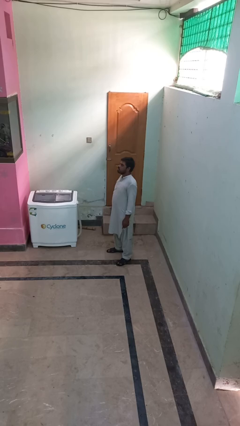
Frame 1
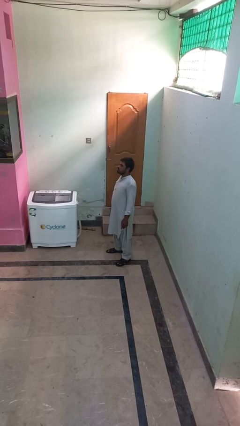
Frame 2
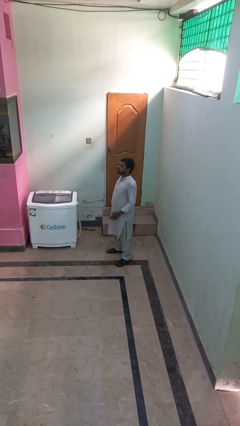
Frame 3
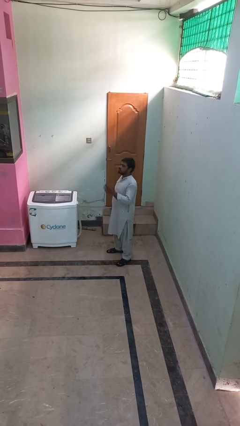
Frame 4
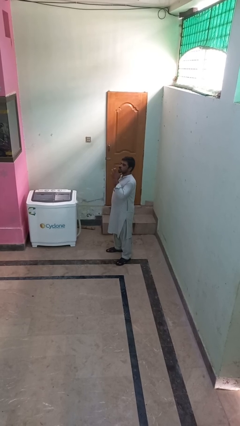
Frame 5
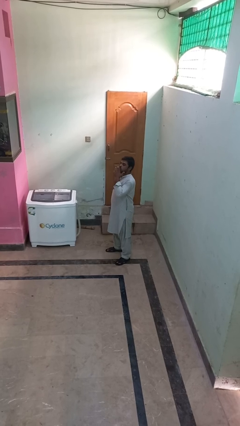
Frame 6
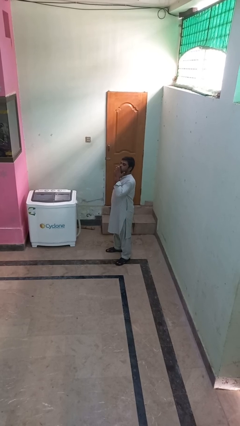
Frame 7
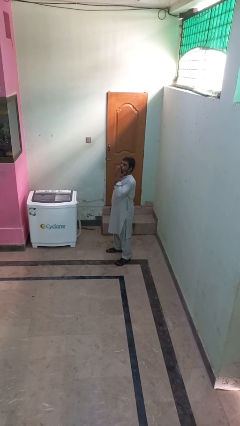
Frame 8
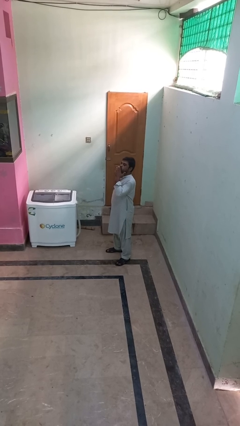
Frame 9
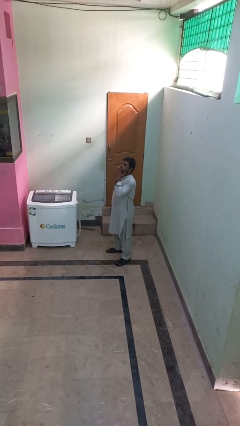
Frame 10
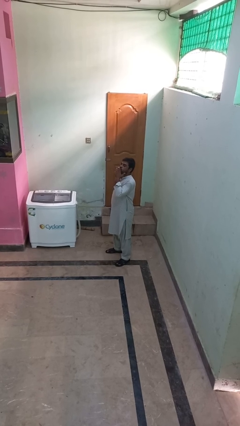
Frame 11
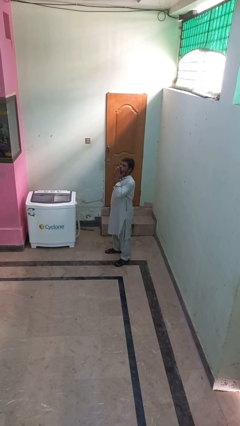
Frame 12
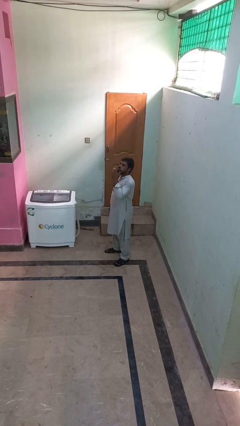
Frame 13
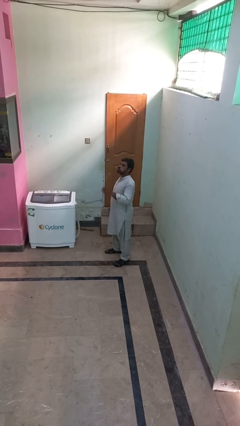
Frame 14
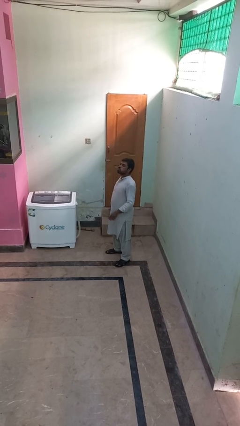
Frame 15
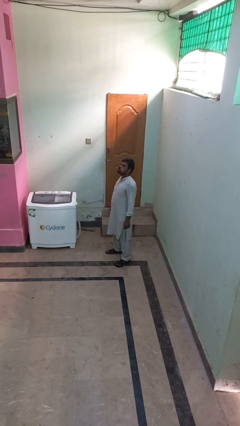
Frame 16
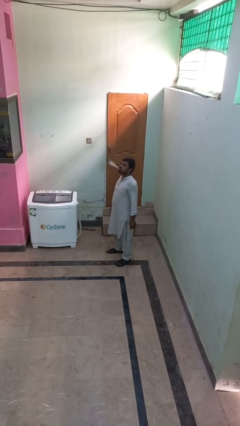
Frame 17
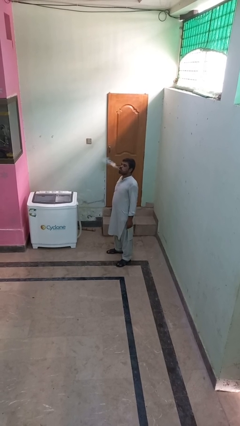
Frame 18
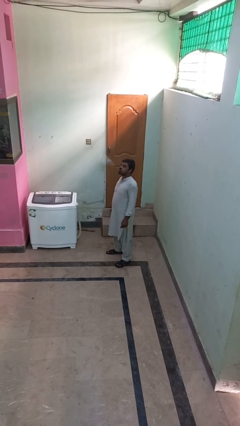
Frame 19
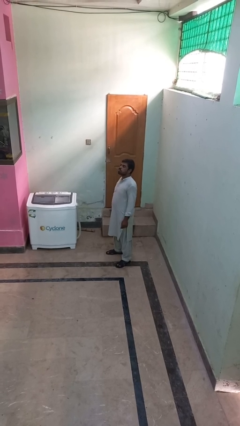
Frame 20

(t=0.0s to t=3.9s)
person vapes

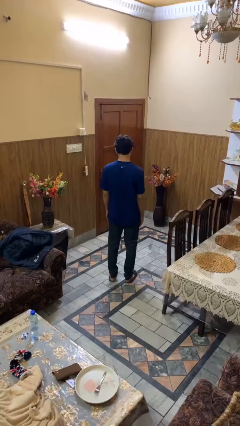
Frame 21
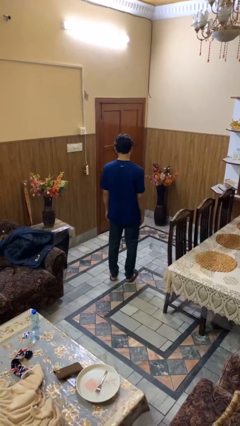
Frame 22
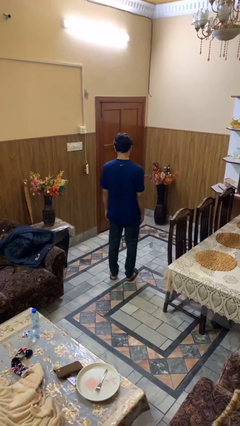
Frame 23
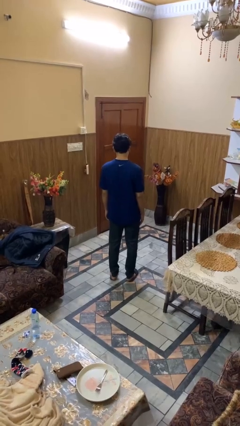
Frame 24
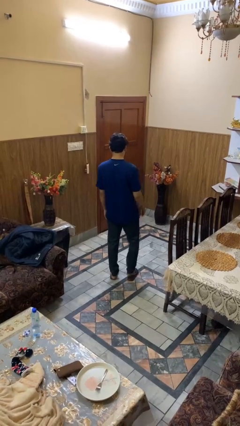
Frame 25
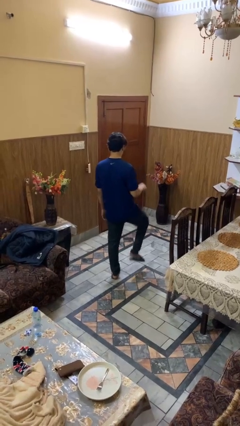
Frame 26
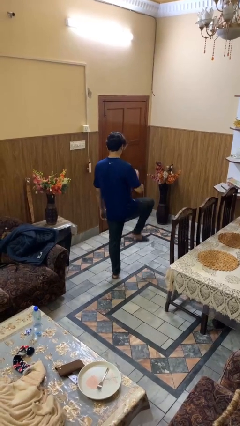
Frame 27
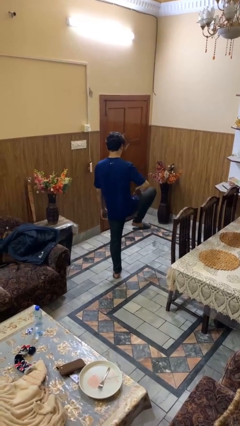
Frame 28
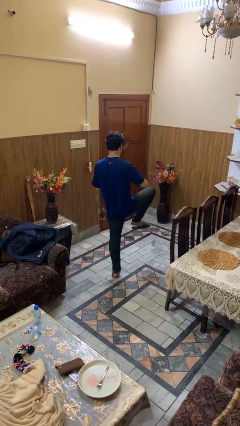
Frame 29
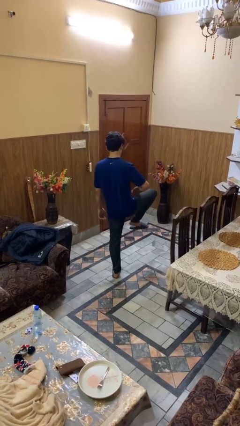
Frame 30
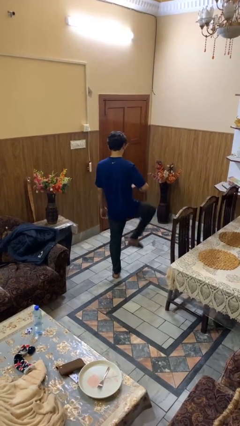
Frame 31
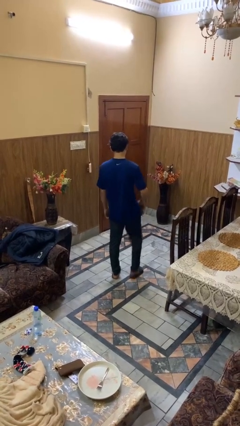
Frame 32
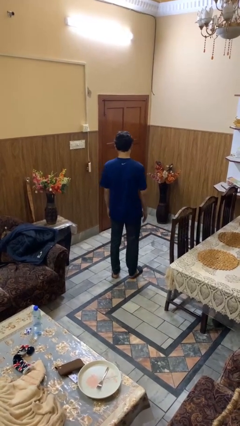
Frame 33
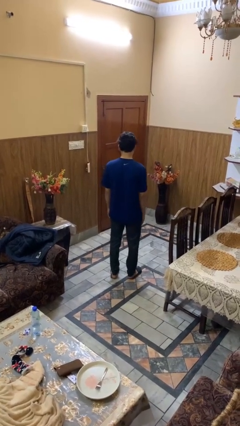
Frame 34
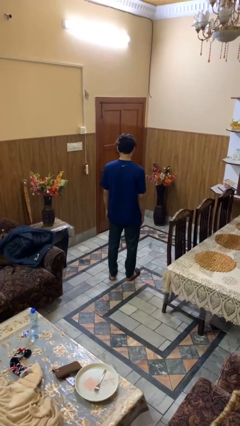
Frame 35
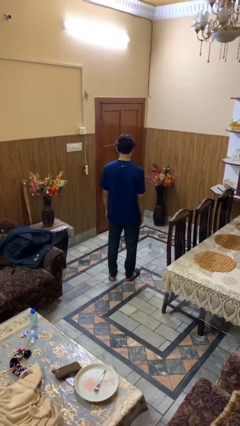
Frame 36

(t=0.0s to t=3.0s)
person slaps hands on thighs

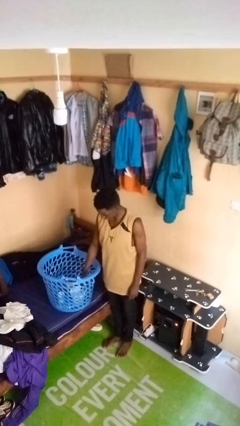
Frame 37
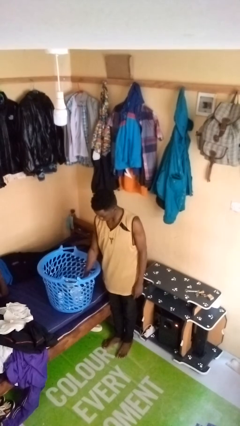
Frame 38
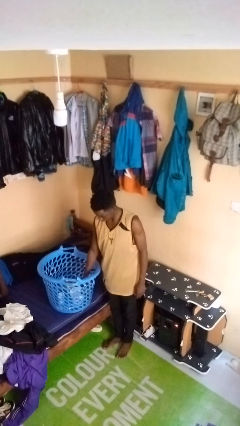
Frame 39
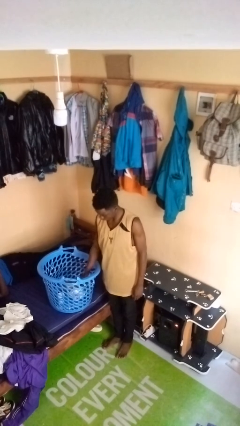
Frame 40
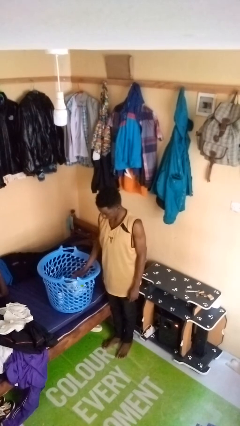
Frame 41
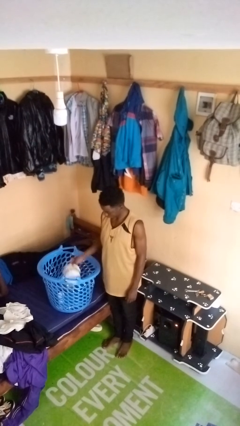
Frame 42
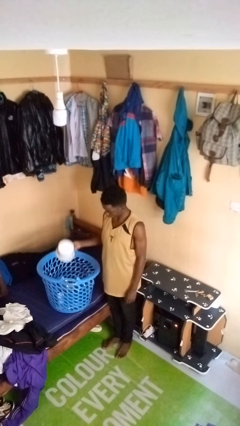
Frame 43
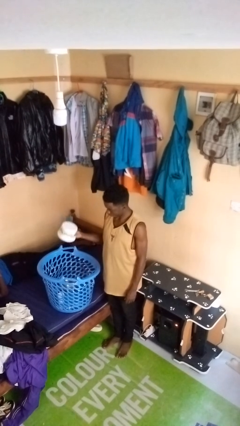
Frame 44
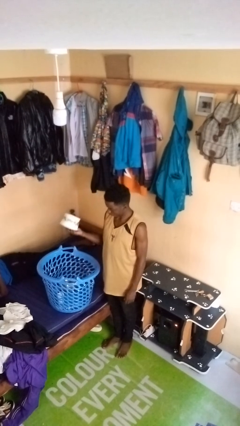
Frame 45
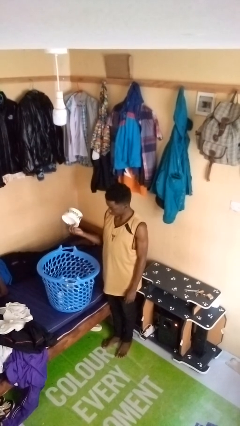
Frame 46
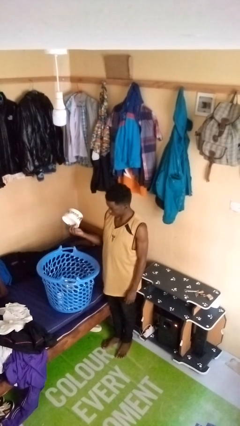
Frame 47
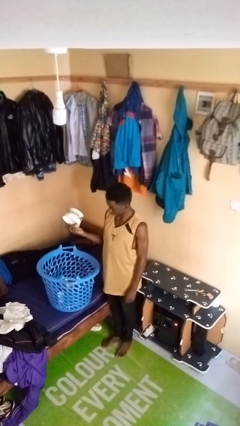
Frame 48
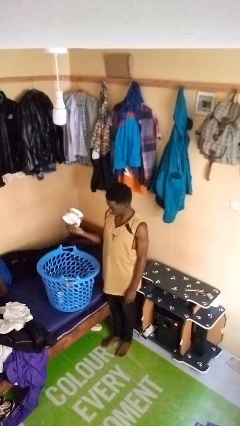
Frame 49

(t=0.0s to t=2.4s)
person takes object from basket

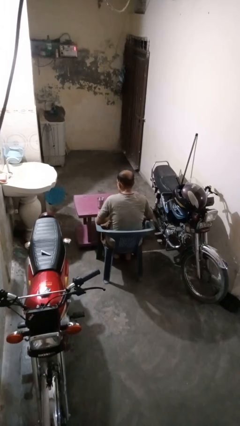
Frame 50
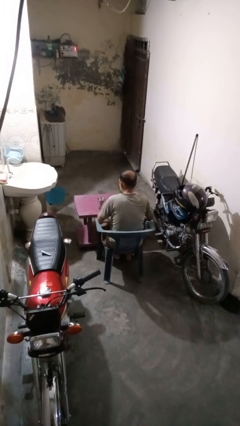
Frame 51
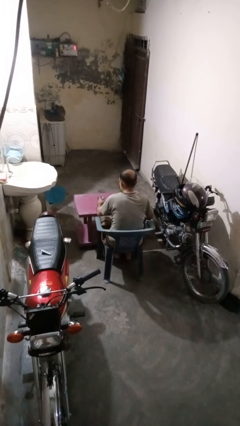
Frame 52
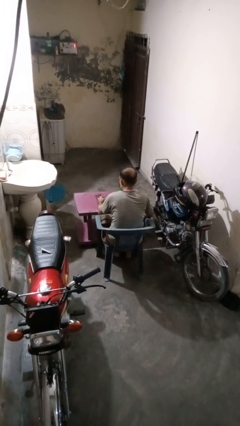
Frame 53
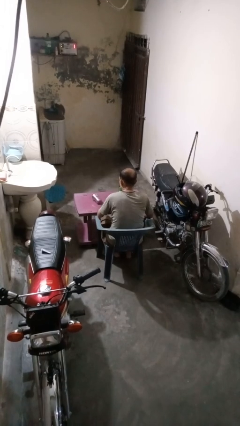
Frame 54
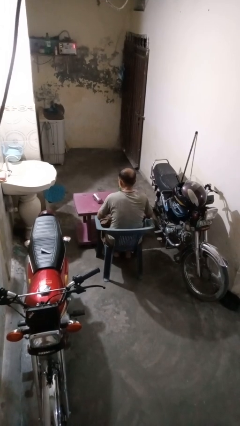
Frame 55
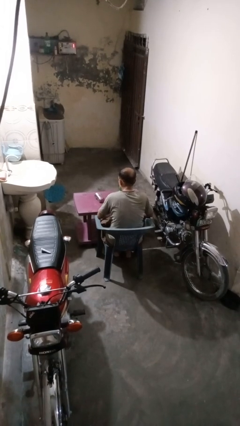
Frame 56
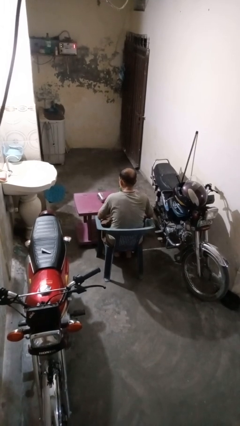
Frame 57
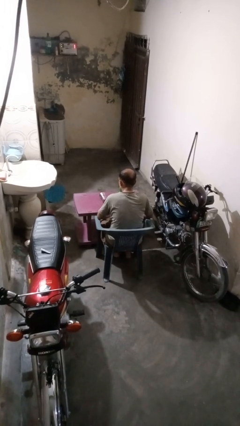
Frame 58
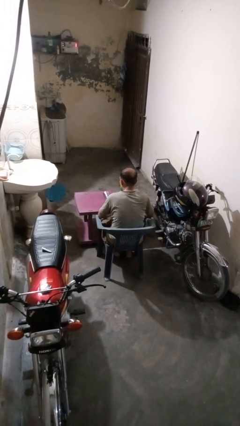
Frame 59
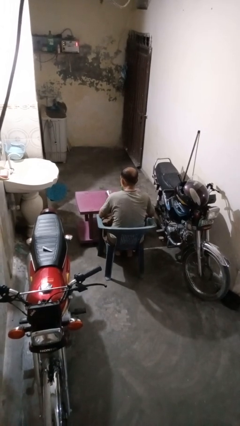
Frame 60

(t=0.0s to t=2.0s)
person knocks over glass

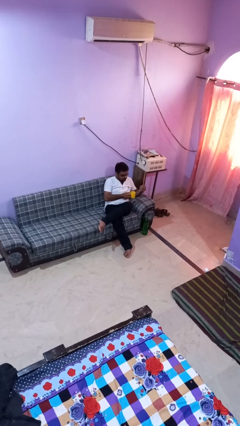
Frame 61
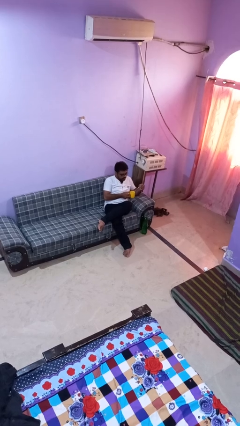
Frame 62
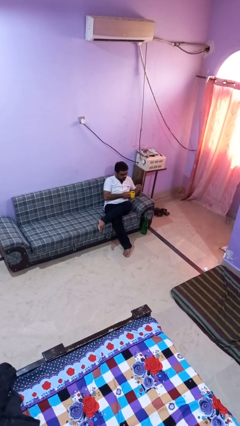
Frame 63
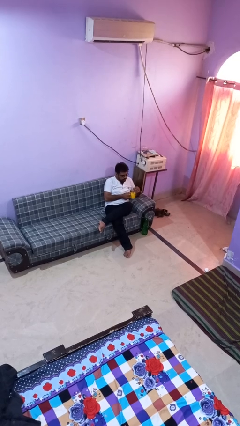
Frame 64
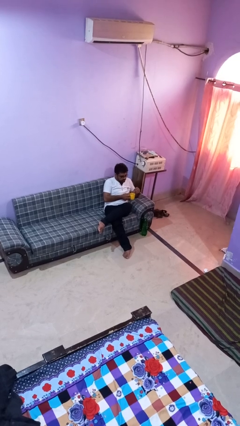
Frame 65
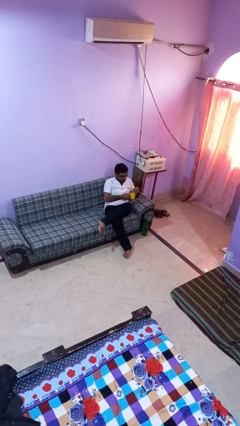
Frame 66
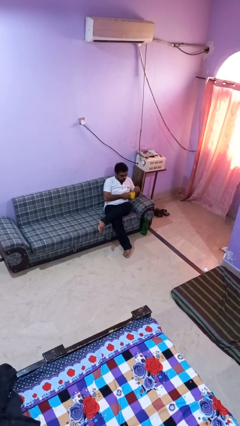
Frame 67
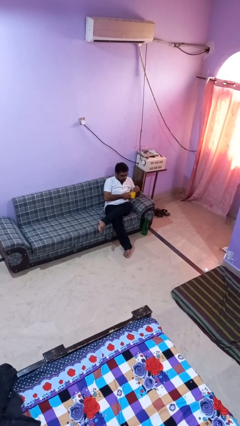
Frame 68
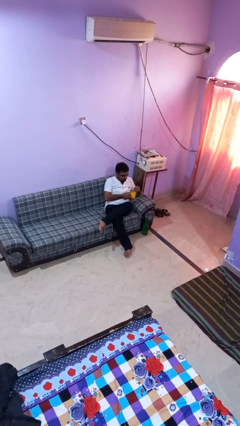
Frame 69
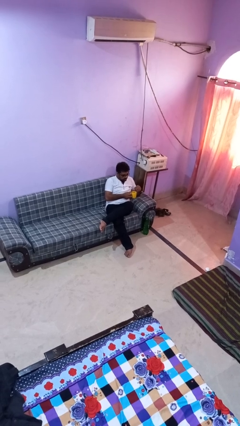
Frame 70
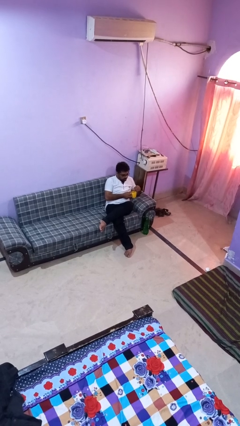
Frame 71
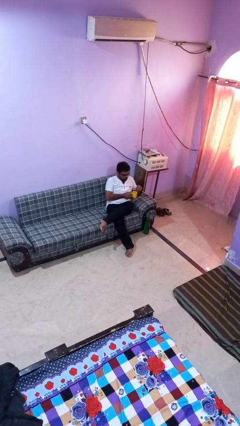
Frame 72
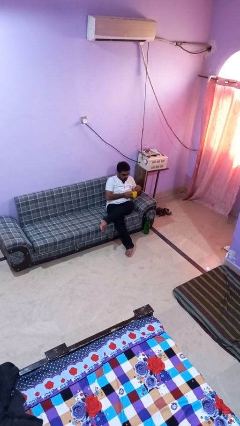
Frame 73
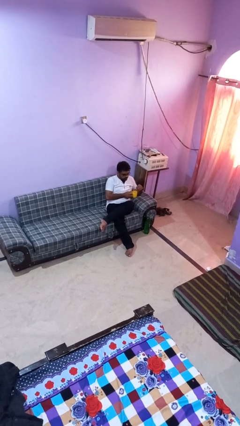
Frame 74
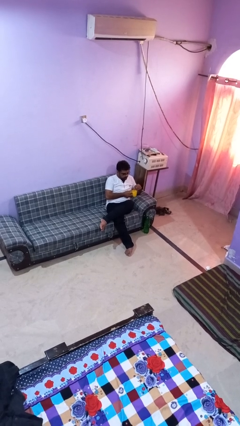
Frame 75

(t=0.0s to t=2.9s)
person stirs mug

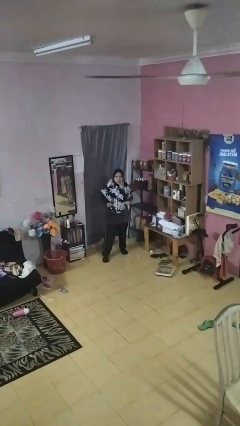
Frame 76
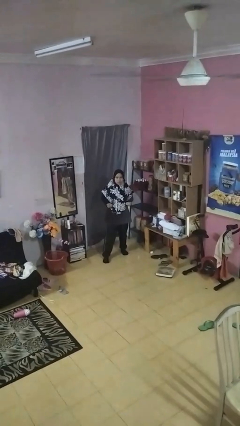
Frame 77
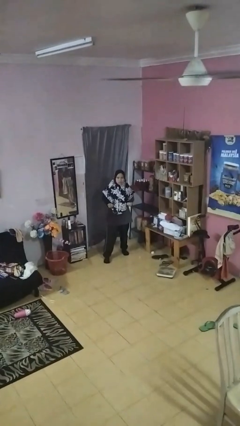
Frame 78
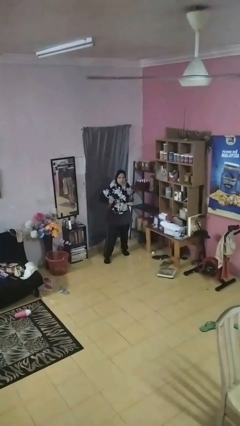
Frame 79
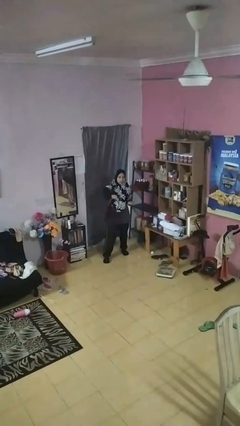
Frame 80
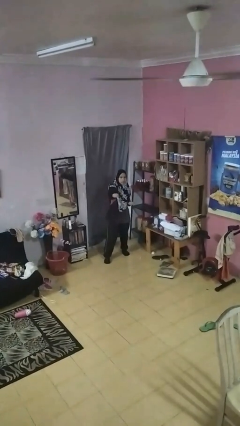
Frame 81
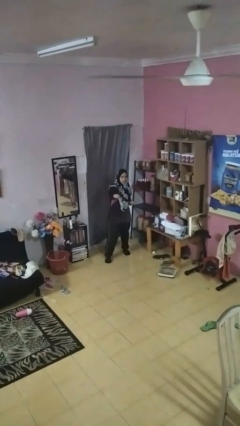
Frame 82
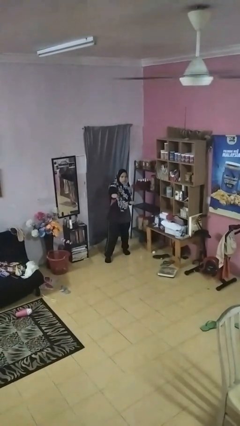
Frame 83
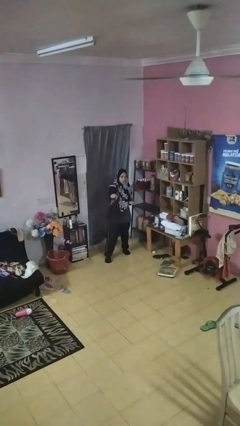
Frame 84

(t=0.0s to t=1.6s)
person punches

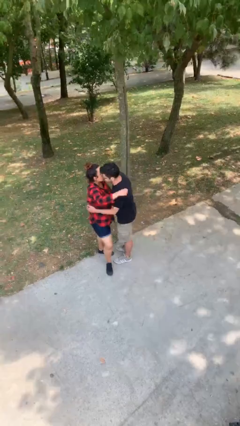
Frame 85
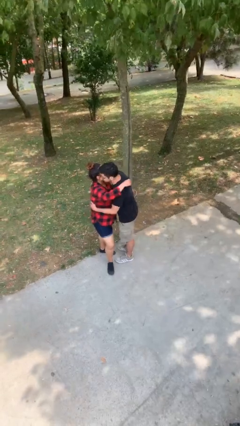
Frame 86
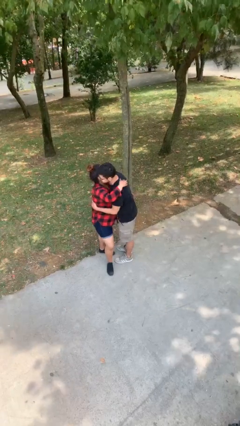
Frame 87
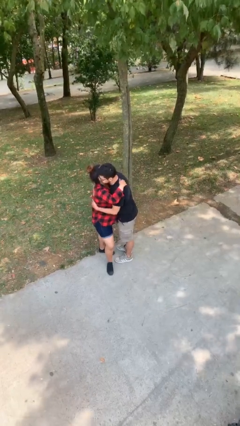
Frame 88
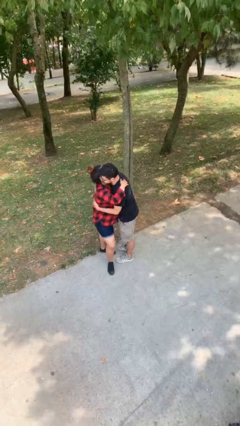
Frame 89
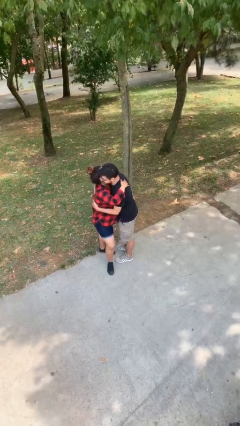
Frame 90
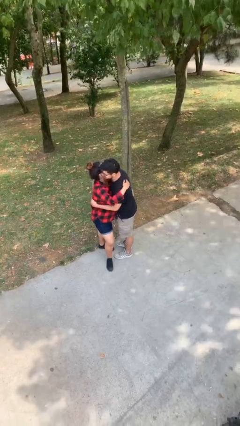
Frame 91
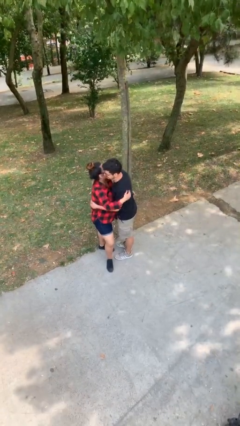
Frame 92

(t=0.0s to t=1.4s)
person embraces person

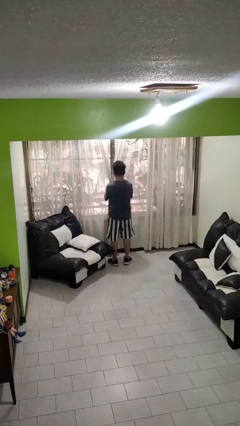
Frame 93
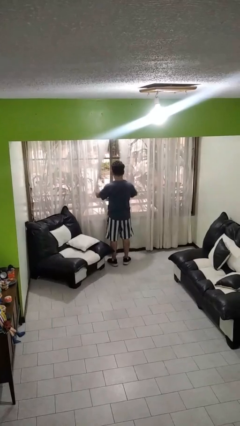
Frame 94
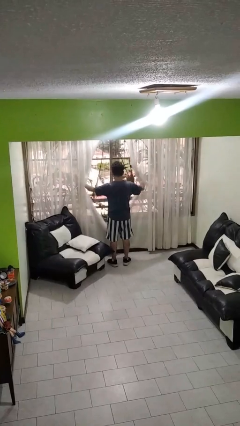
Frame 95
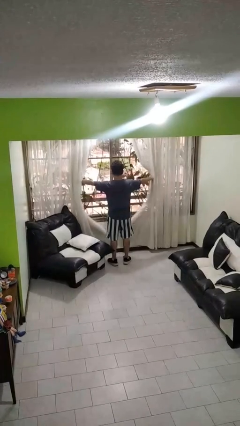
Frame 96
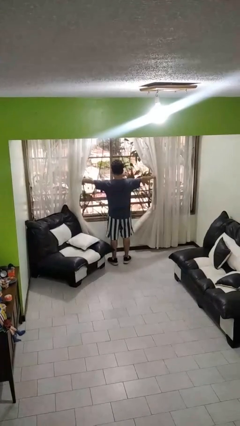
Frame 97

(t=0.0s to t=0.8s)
person opens curtains
